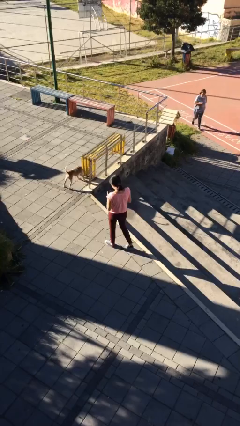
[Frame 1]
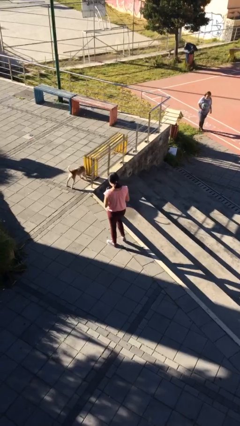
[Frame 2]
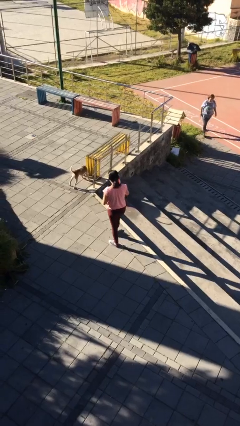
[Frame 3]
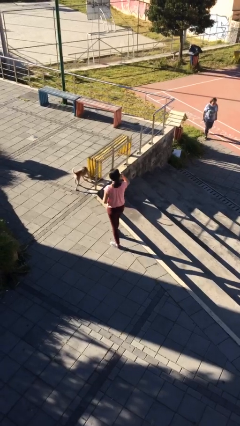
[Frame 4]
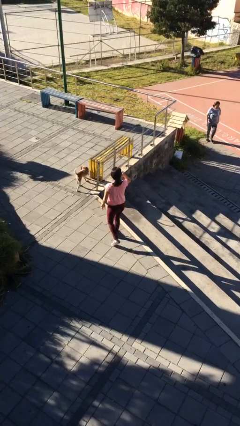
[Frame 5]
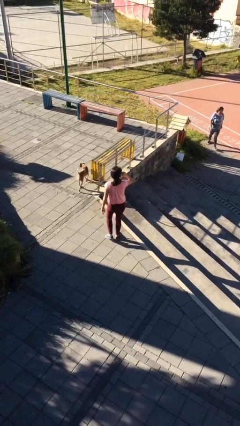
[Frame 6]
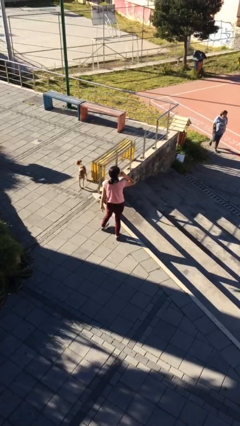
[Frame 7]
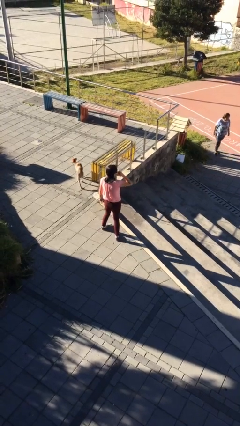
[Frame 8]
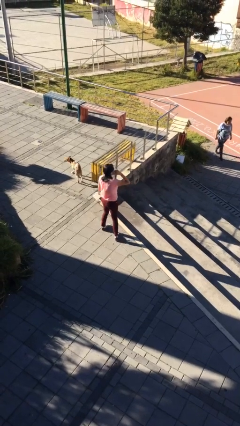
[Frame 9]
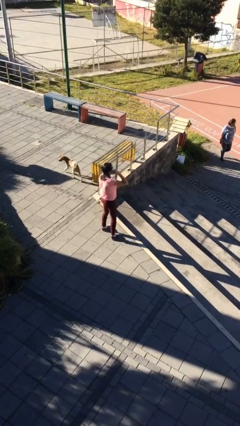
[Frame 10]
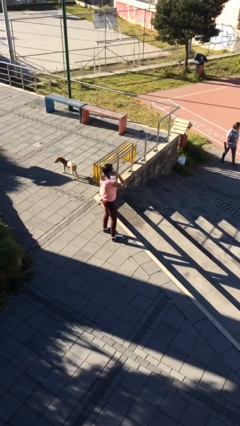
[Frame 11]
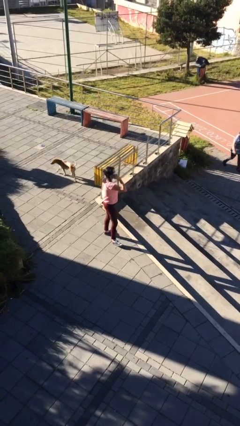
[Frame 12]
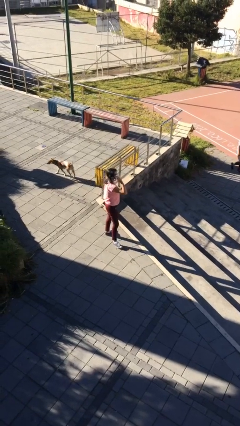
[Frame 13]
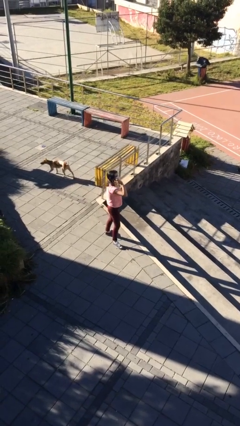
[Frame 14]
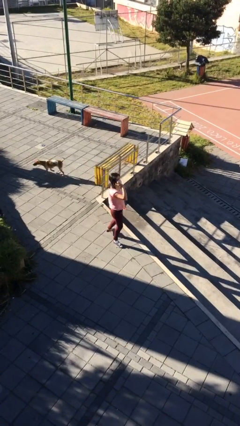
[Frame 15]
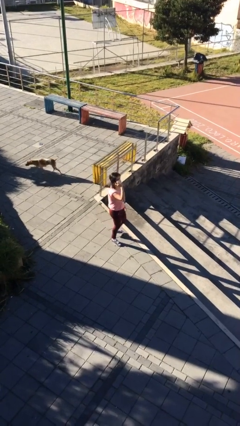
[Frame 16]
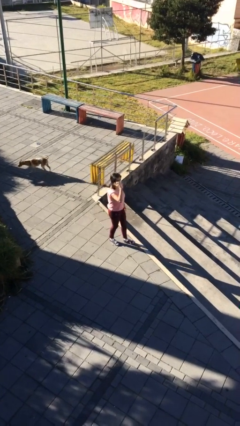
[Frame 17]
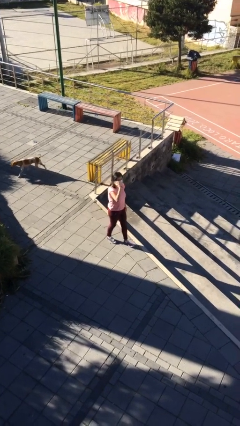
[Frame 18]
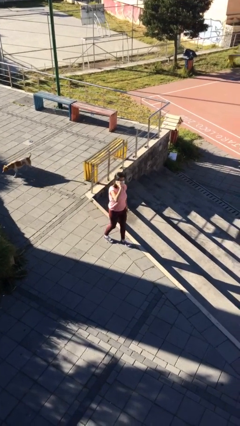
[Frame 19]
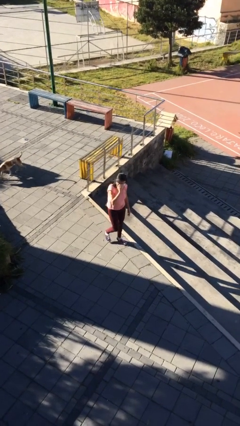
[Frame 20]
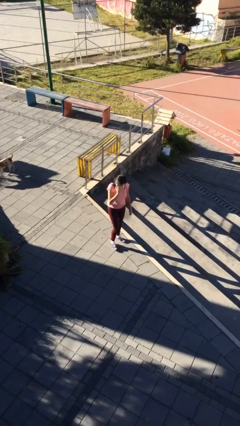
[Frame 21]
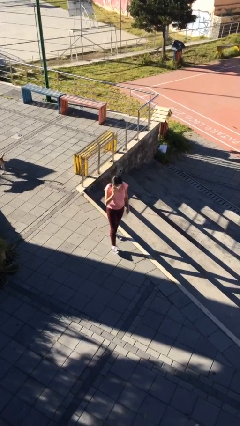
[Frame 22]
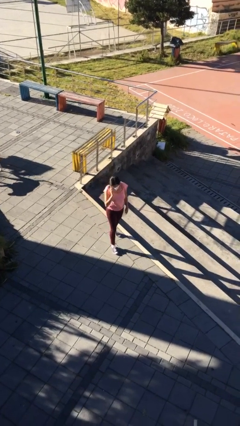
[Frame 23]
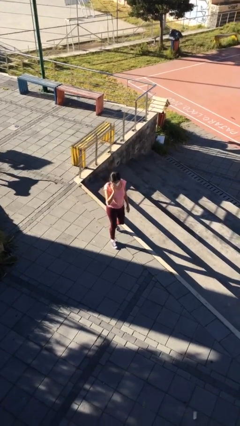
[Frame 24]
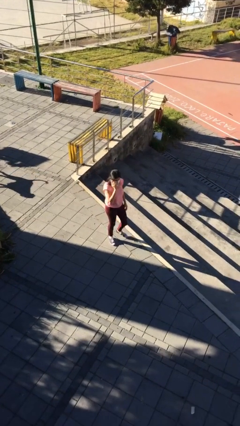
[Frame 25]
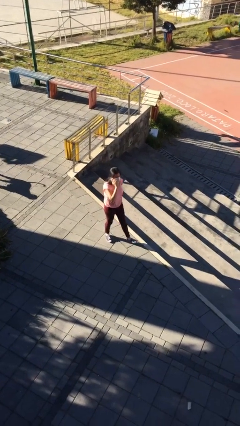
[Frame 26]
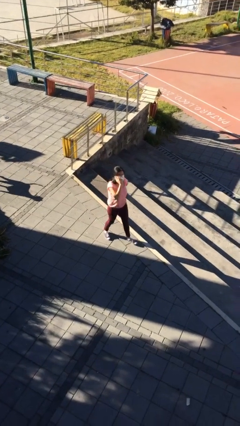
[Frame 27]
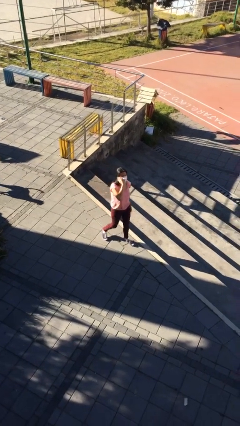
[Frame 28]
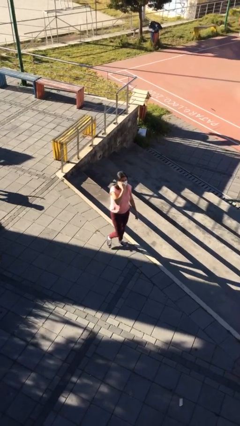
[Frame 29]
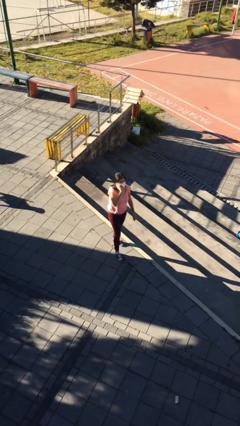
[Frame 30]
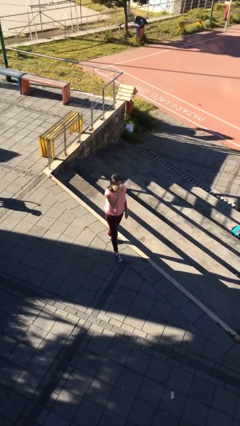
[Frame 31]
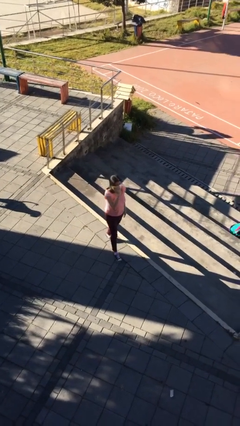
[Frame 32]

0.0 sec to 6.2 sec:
person talks on phone

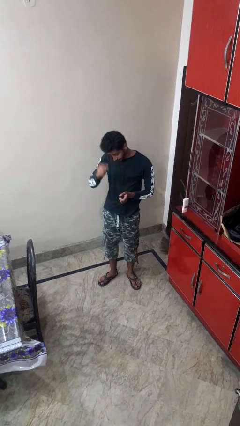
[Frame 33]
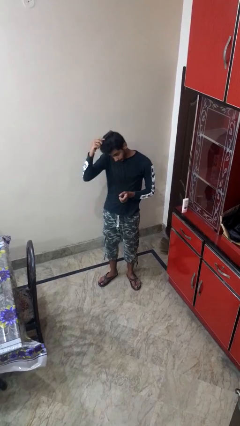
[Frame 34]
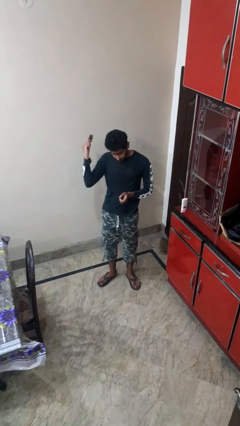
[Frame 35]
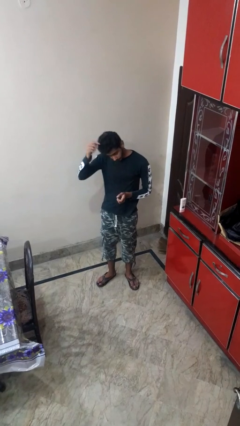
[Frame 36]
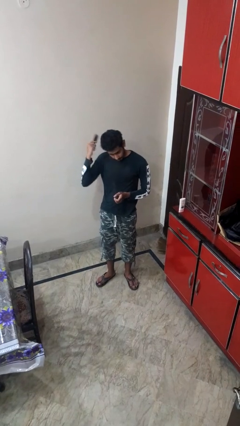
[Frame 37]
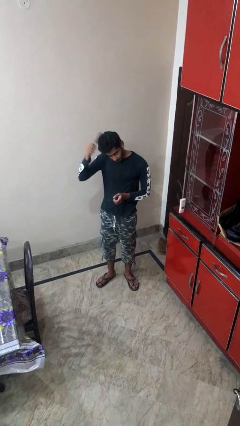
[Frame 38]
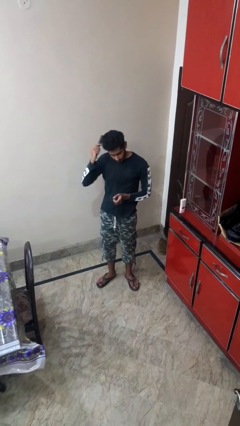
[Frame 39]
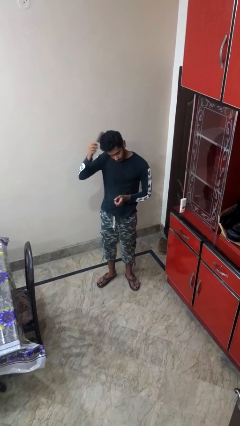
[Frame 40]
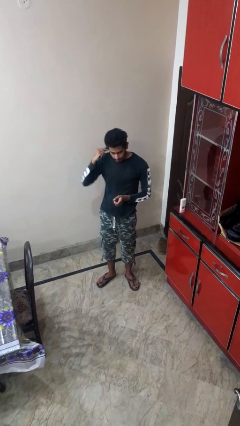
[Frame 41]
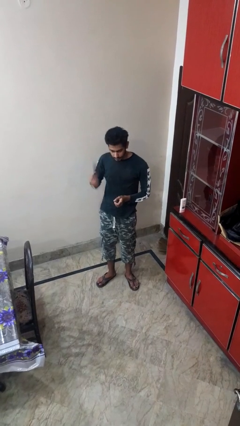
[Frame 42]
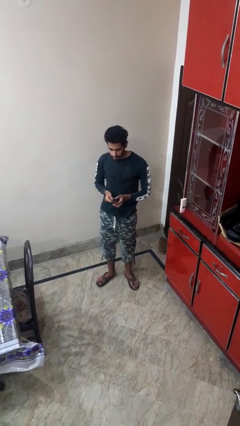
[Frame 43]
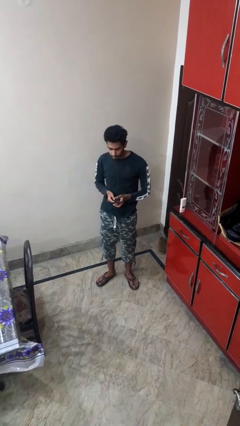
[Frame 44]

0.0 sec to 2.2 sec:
person brushes hair

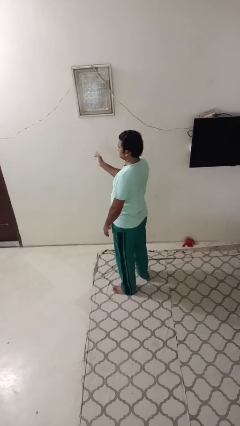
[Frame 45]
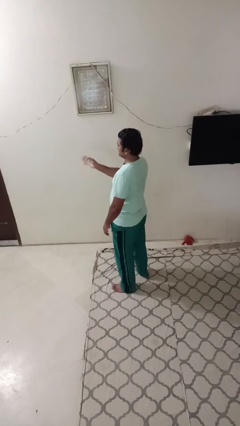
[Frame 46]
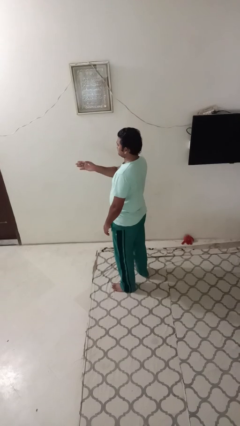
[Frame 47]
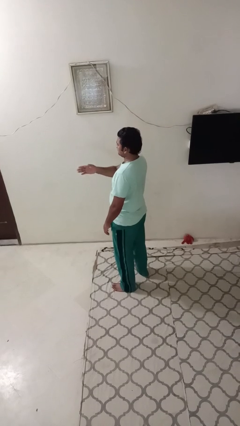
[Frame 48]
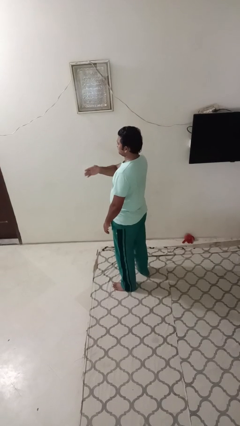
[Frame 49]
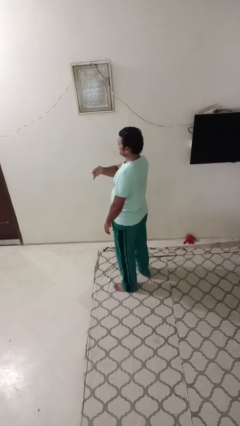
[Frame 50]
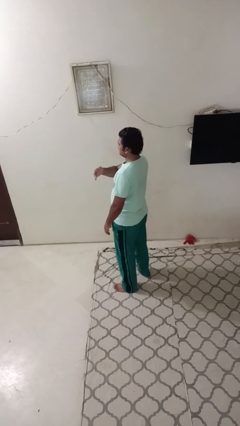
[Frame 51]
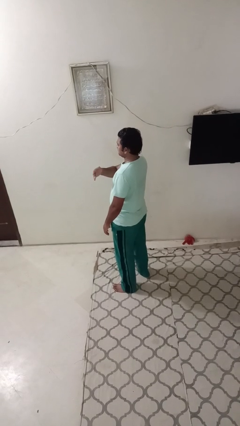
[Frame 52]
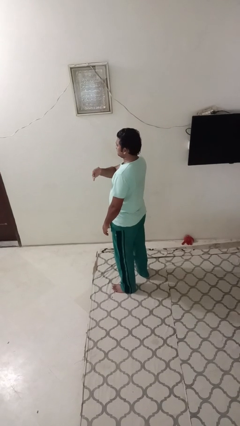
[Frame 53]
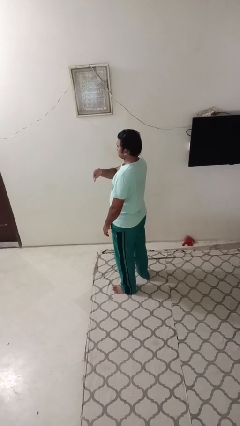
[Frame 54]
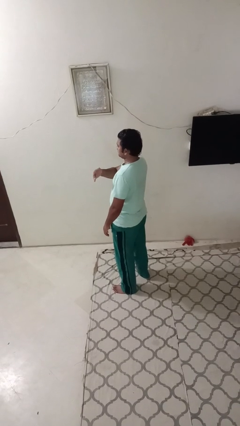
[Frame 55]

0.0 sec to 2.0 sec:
person gestures swipe left

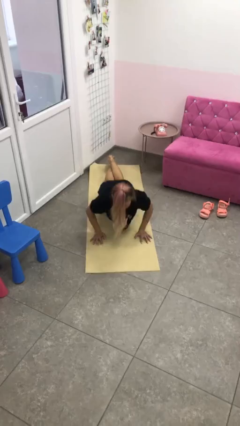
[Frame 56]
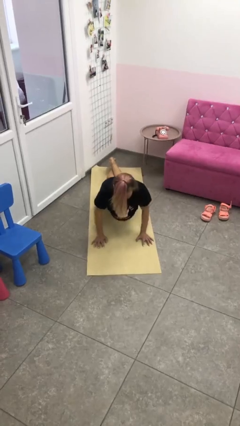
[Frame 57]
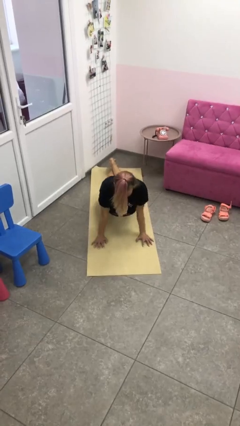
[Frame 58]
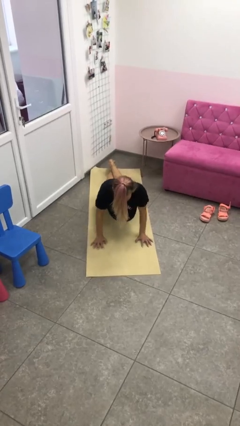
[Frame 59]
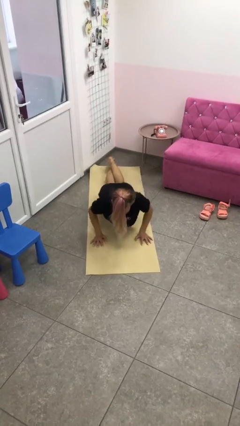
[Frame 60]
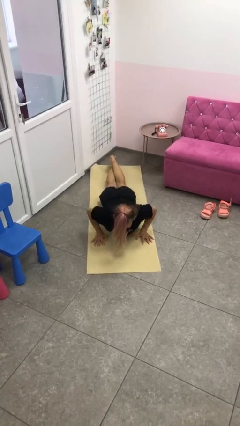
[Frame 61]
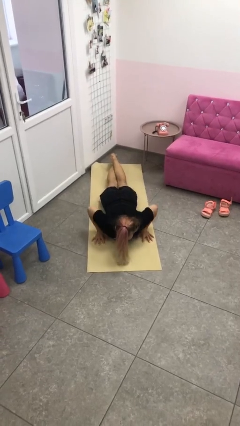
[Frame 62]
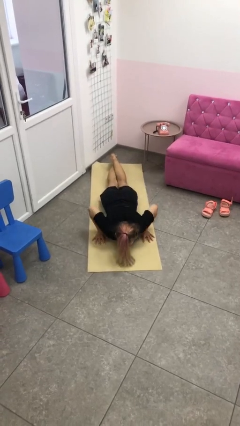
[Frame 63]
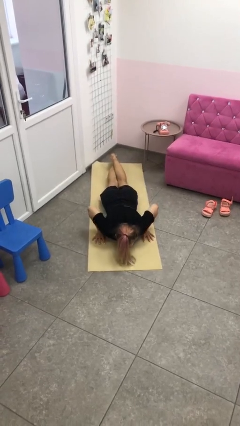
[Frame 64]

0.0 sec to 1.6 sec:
person exercises with pushup

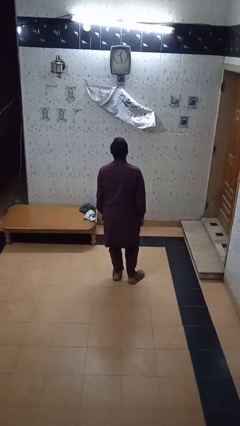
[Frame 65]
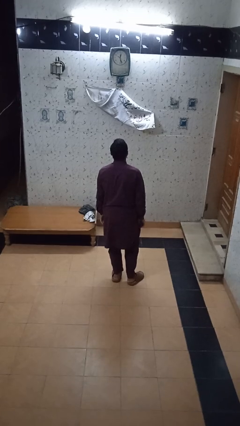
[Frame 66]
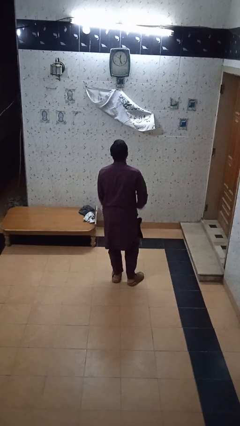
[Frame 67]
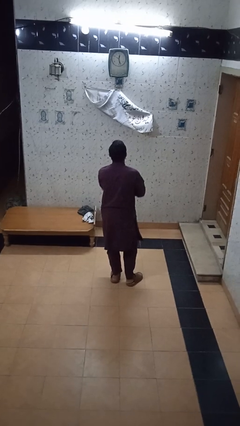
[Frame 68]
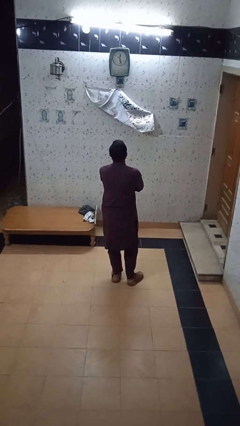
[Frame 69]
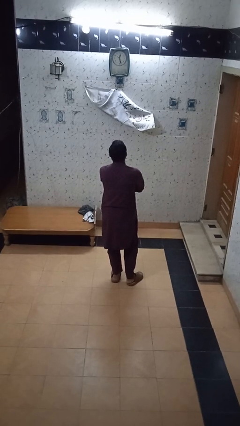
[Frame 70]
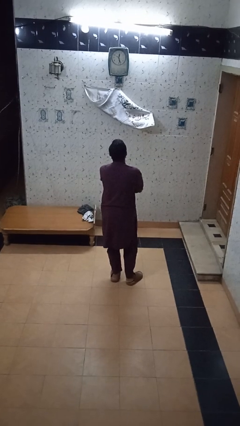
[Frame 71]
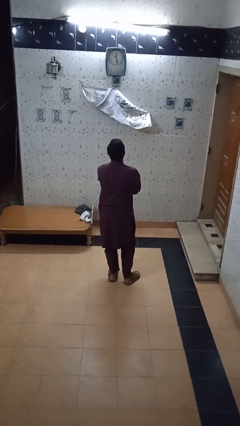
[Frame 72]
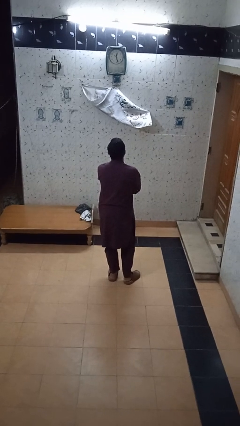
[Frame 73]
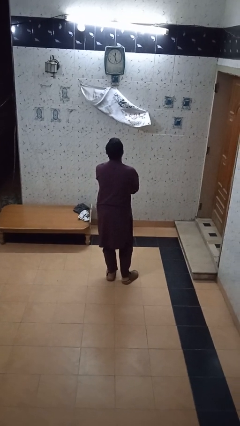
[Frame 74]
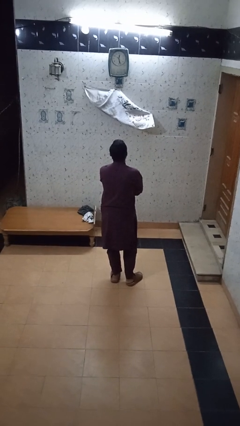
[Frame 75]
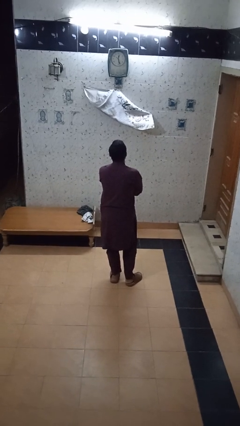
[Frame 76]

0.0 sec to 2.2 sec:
person crosses arms

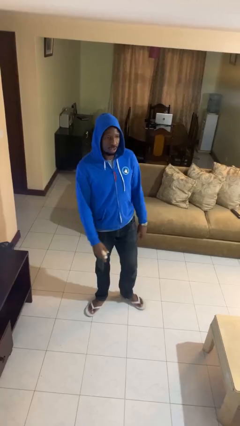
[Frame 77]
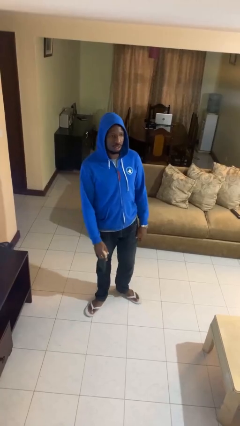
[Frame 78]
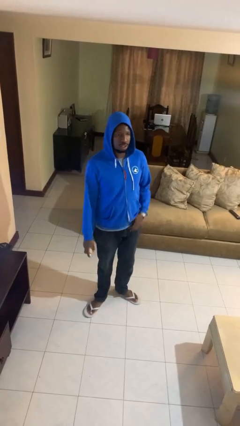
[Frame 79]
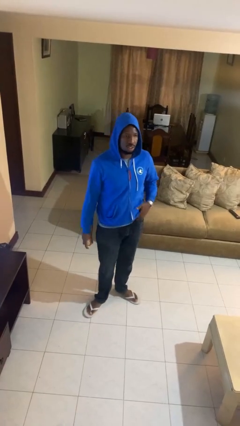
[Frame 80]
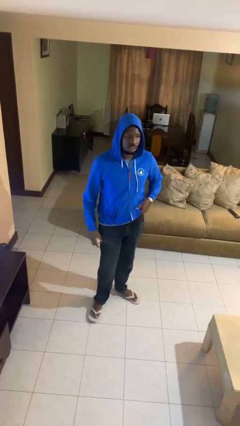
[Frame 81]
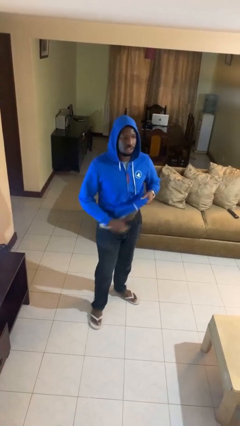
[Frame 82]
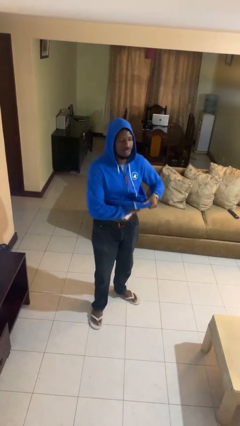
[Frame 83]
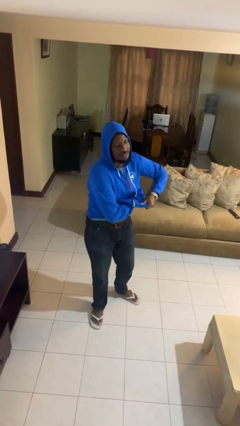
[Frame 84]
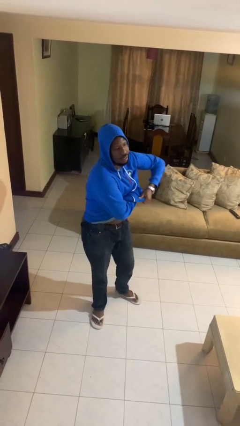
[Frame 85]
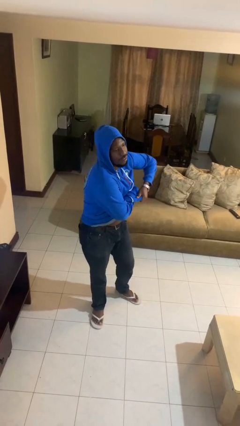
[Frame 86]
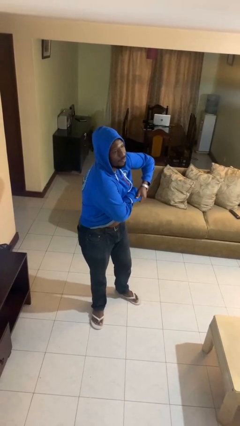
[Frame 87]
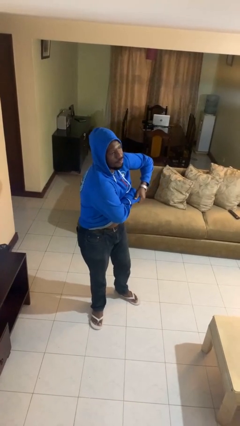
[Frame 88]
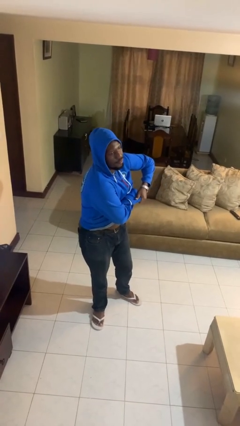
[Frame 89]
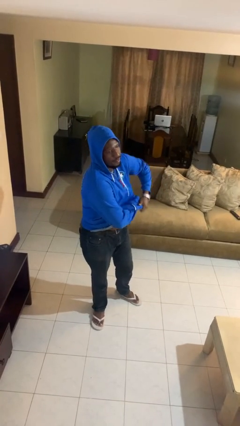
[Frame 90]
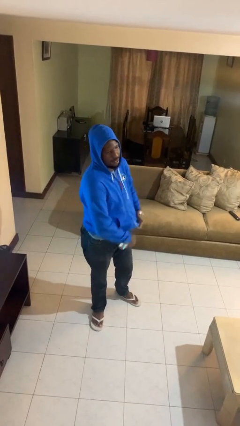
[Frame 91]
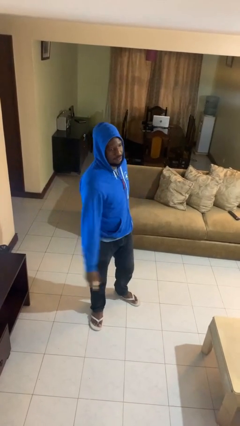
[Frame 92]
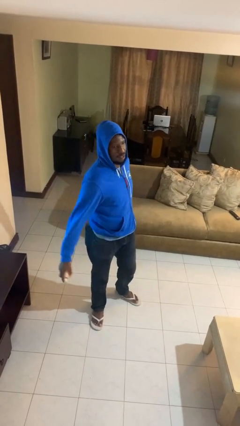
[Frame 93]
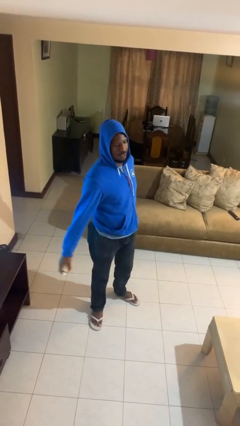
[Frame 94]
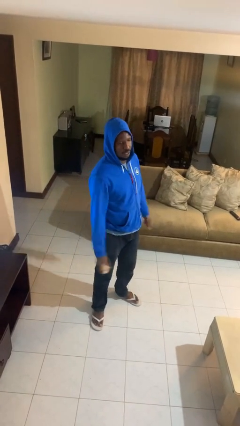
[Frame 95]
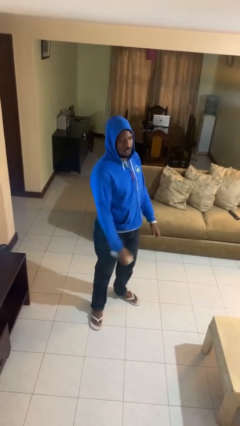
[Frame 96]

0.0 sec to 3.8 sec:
person applies deodorant
